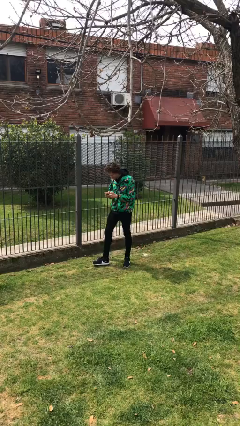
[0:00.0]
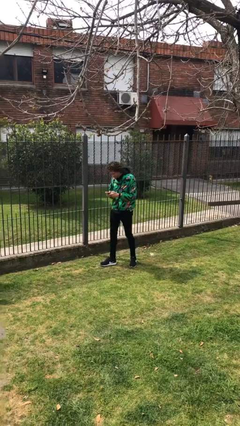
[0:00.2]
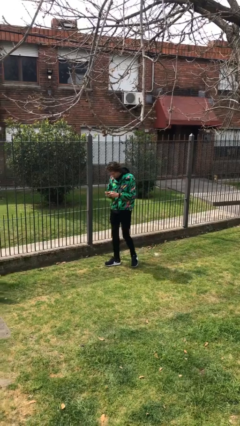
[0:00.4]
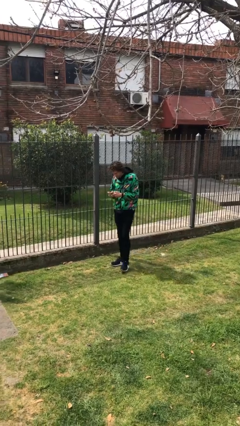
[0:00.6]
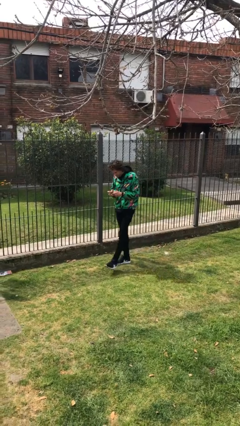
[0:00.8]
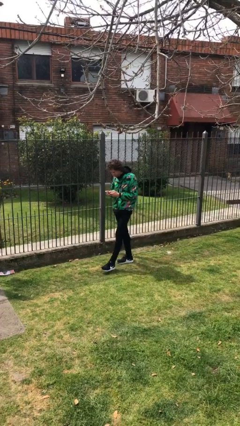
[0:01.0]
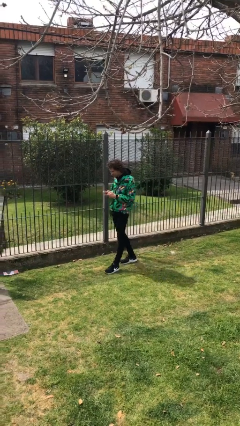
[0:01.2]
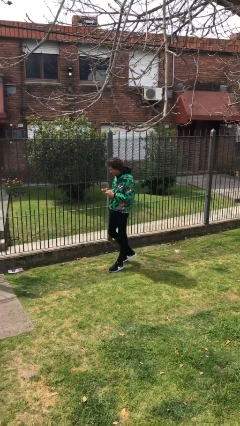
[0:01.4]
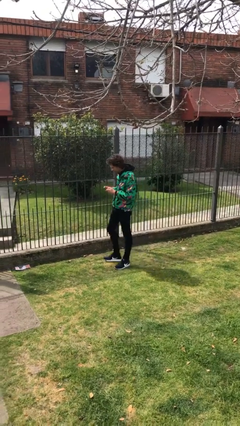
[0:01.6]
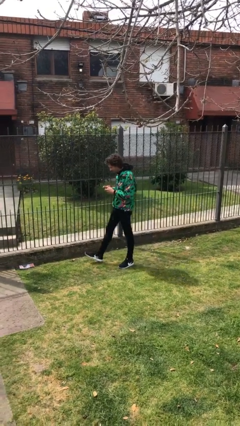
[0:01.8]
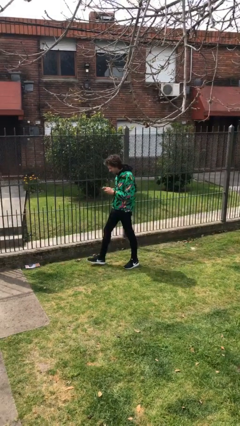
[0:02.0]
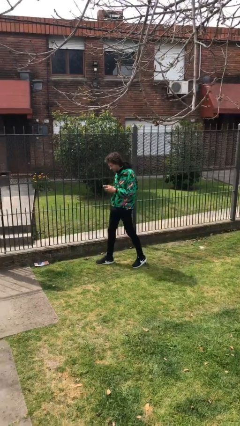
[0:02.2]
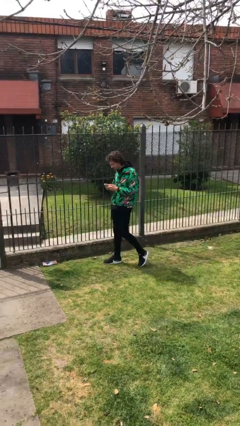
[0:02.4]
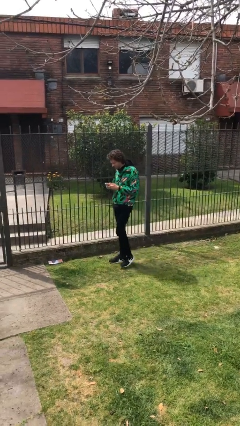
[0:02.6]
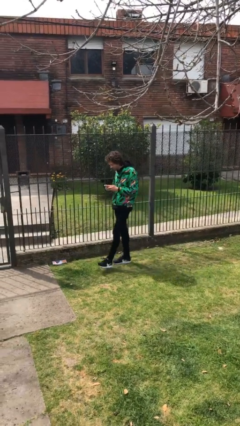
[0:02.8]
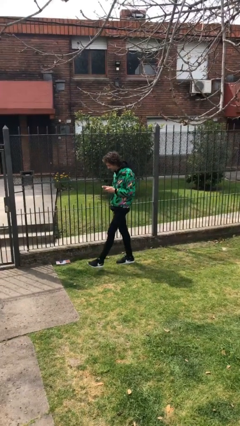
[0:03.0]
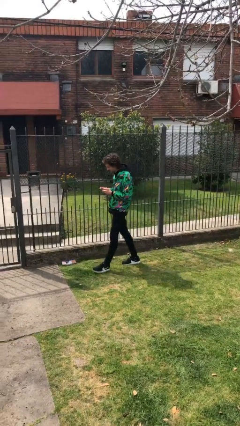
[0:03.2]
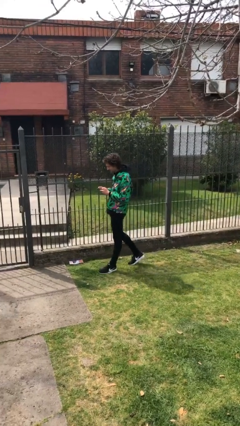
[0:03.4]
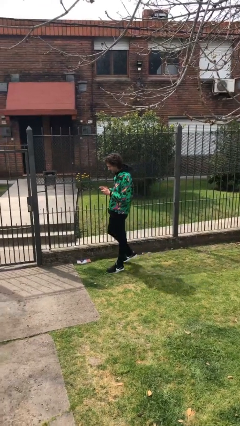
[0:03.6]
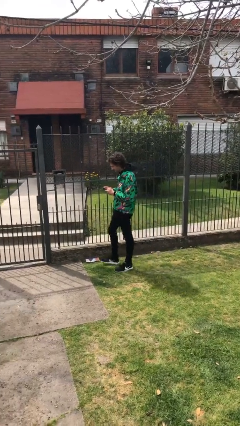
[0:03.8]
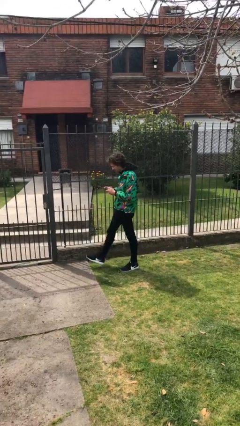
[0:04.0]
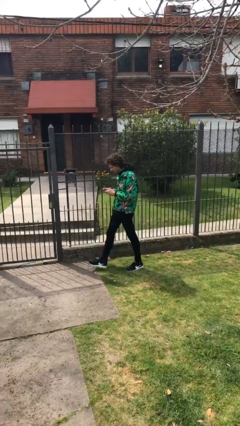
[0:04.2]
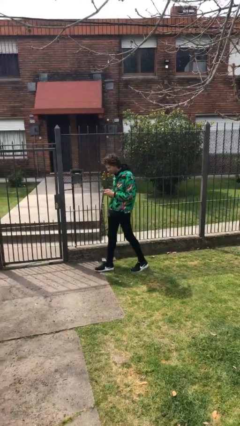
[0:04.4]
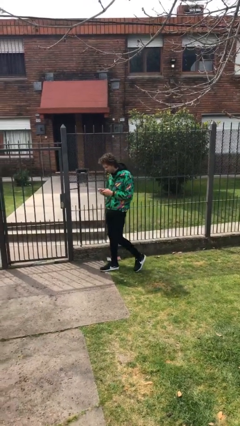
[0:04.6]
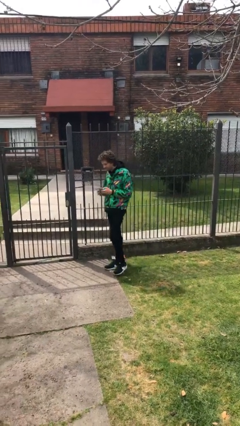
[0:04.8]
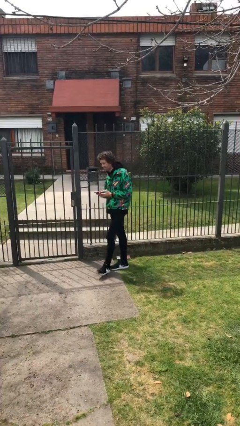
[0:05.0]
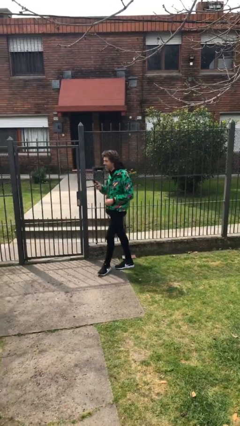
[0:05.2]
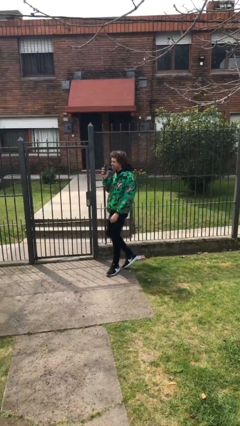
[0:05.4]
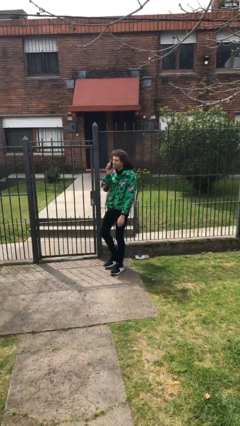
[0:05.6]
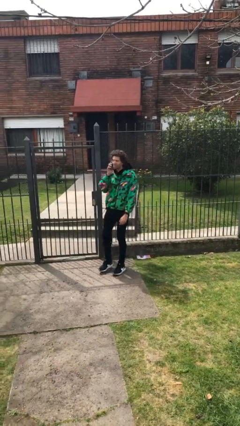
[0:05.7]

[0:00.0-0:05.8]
person texts on phone

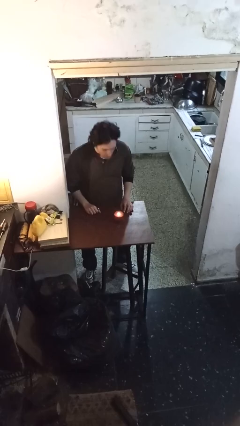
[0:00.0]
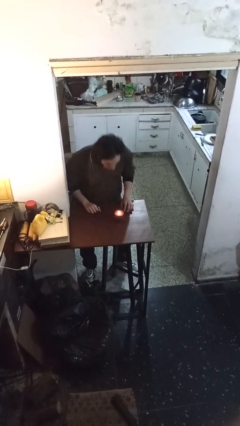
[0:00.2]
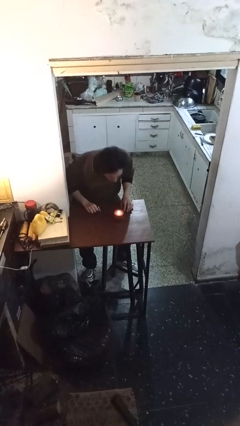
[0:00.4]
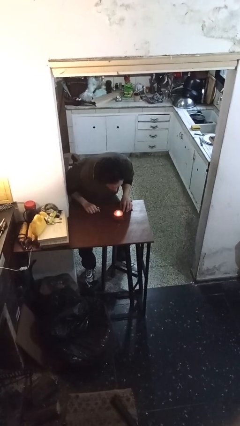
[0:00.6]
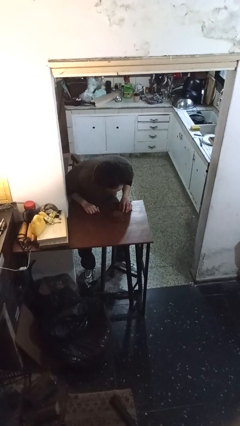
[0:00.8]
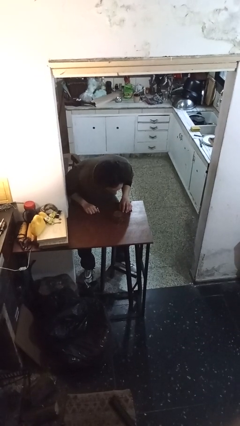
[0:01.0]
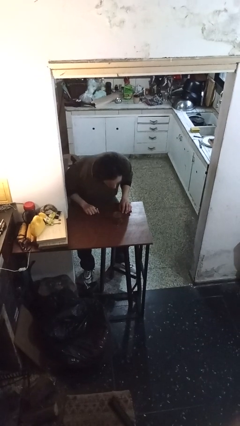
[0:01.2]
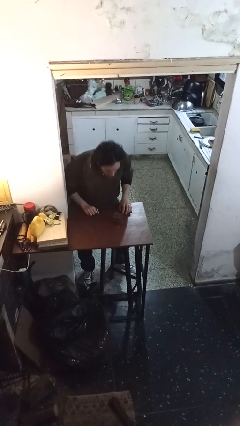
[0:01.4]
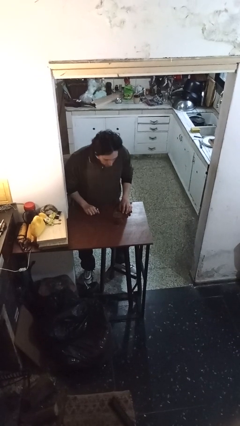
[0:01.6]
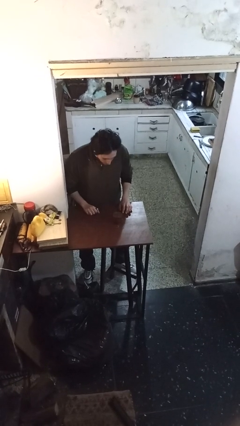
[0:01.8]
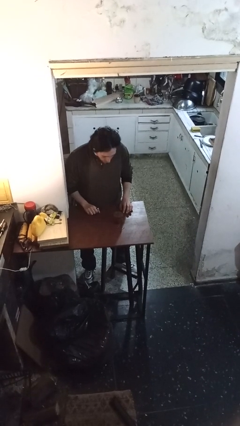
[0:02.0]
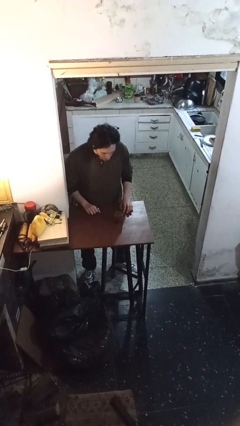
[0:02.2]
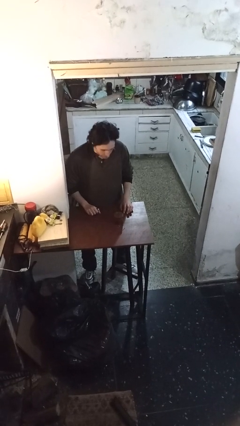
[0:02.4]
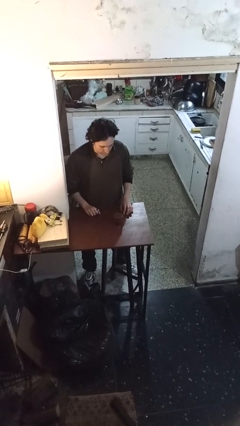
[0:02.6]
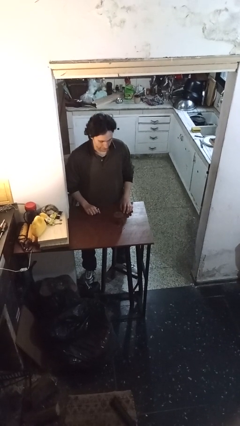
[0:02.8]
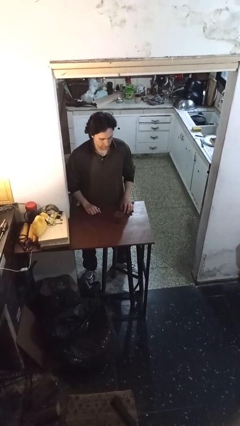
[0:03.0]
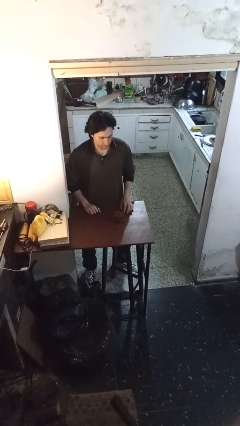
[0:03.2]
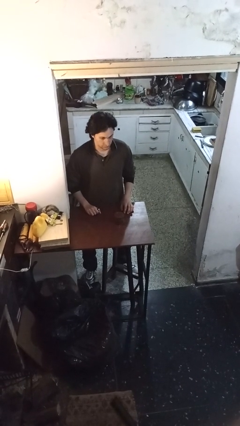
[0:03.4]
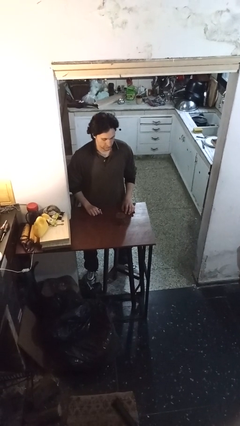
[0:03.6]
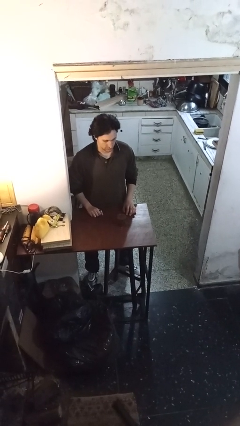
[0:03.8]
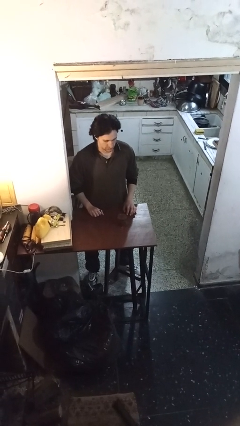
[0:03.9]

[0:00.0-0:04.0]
person extinguishes candle

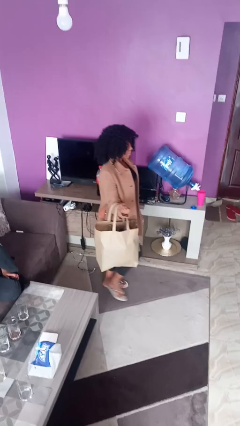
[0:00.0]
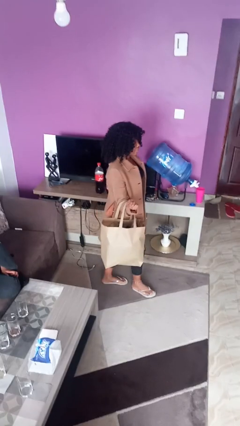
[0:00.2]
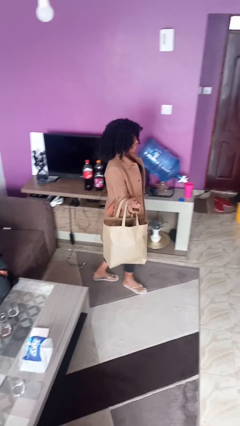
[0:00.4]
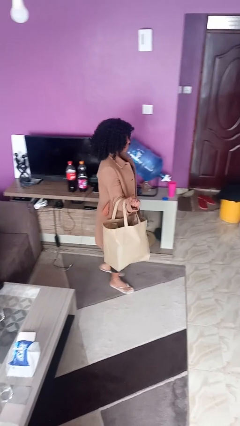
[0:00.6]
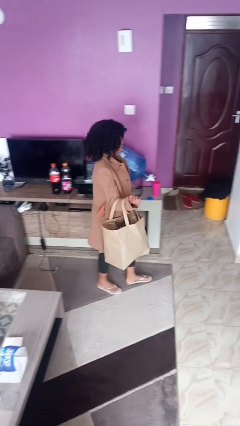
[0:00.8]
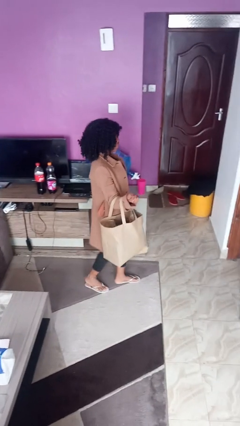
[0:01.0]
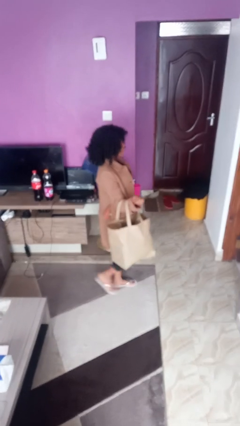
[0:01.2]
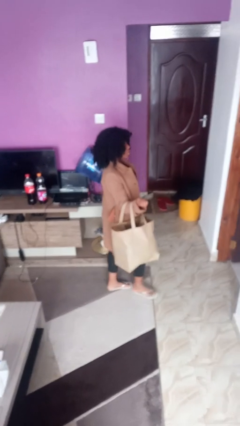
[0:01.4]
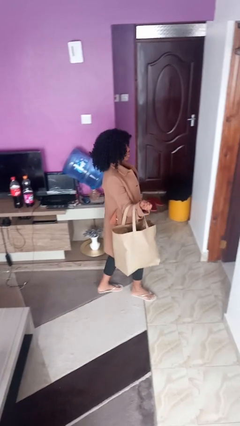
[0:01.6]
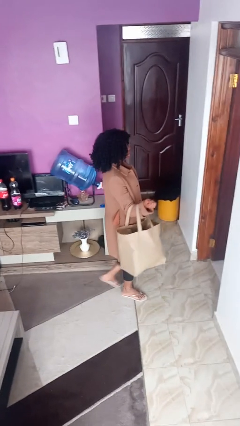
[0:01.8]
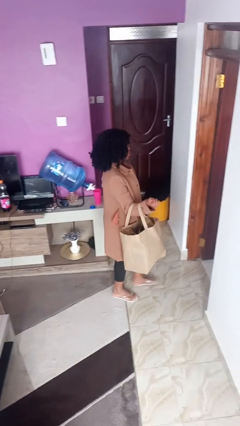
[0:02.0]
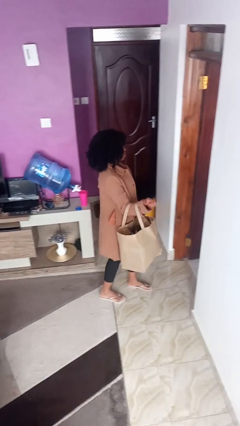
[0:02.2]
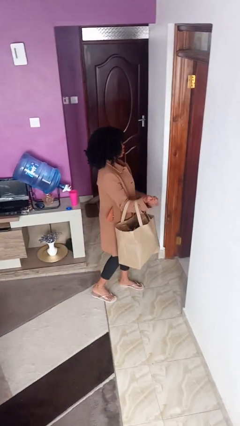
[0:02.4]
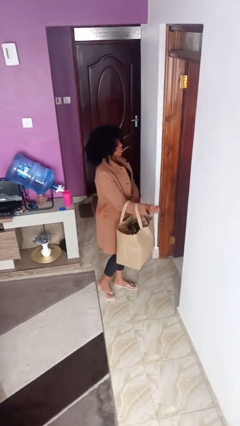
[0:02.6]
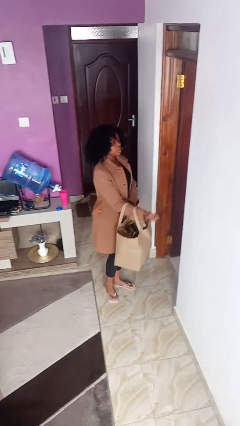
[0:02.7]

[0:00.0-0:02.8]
person carries groceries

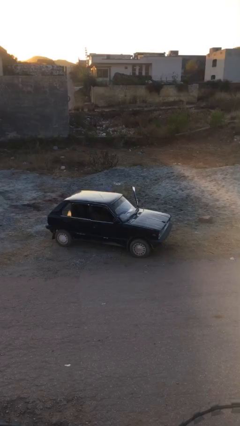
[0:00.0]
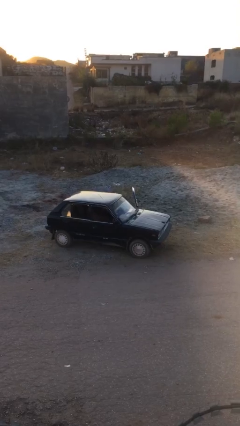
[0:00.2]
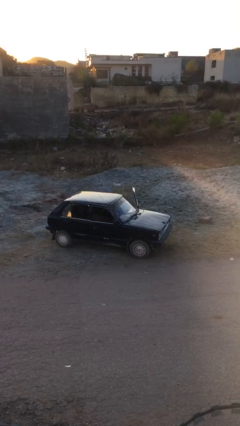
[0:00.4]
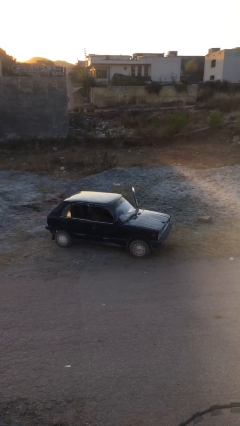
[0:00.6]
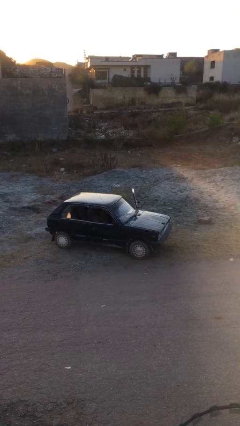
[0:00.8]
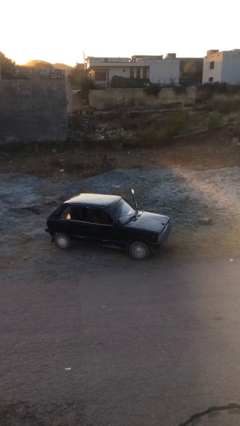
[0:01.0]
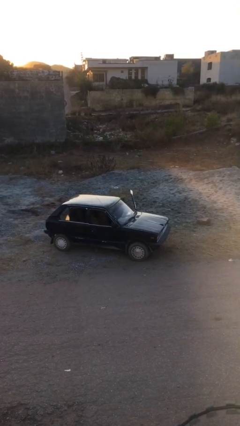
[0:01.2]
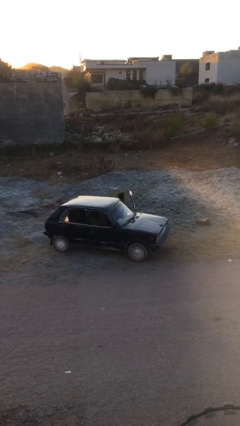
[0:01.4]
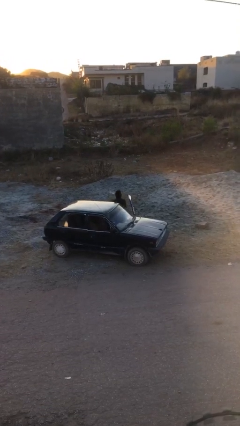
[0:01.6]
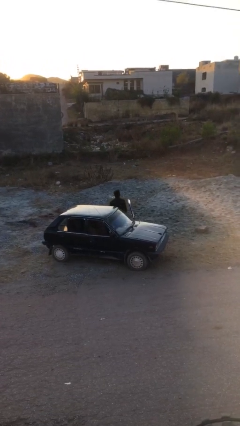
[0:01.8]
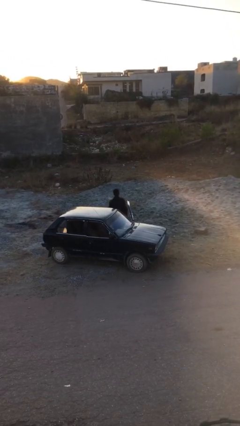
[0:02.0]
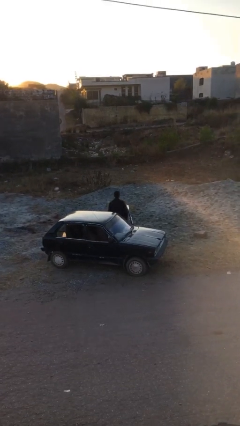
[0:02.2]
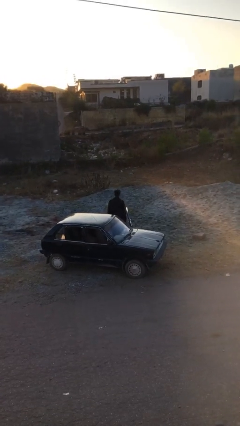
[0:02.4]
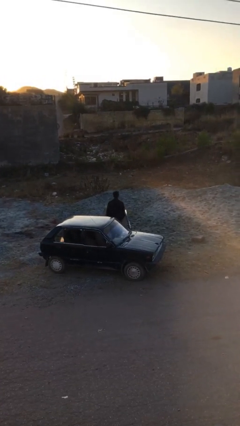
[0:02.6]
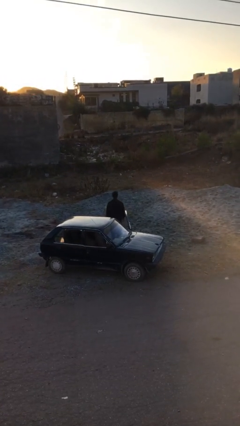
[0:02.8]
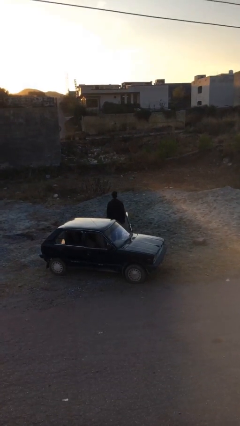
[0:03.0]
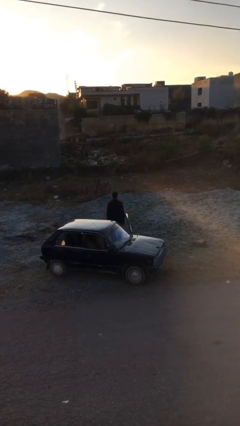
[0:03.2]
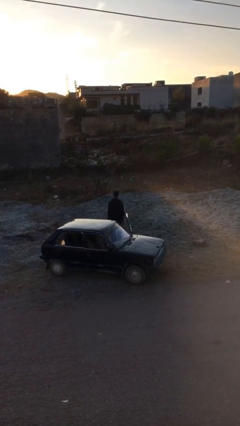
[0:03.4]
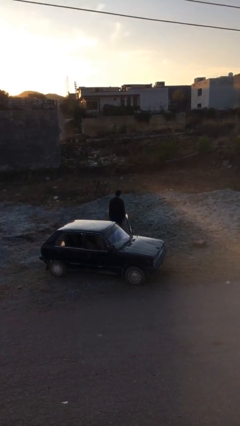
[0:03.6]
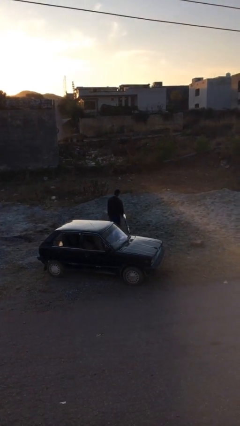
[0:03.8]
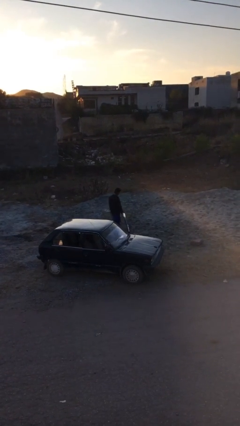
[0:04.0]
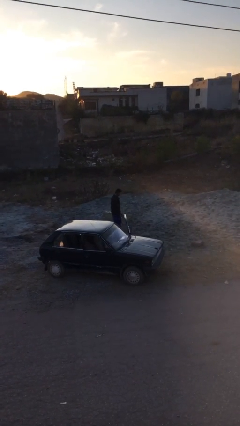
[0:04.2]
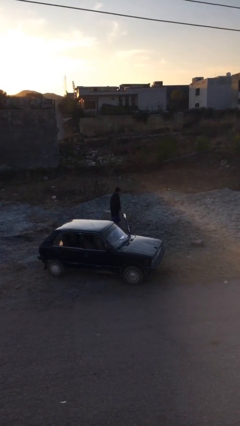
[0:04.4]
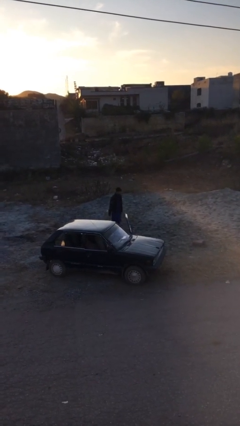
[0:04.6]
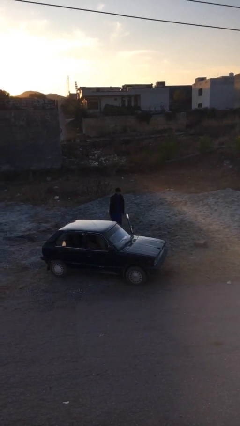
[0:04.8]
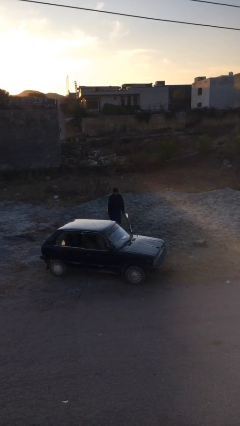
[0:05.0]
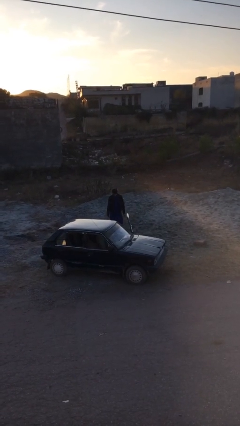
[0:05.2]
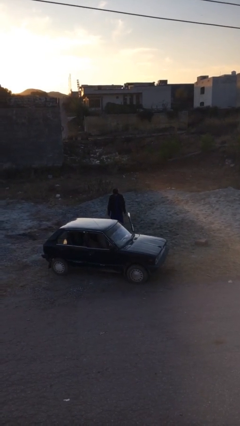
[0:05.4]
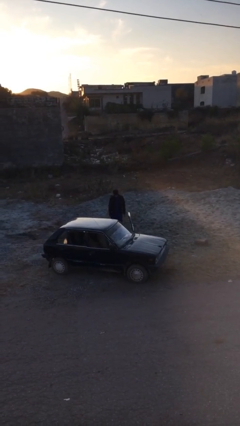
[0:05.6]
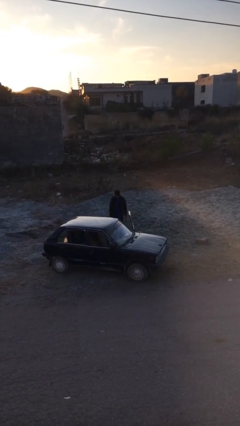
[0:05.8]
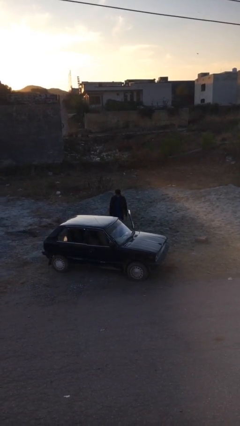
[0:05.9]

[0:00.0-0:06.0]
person exits car
